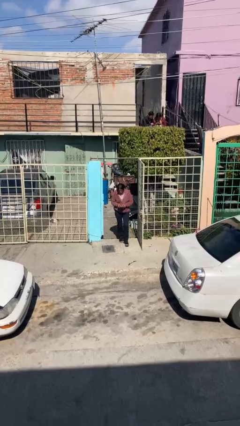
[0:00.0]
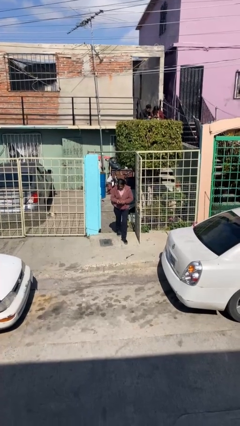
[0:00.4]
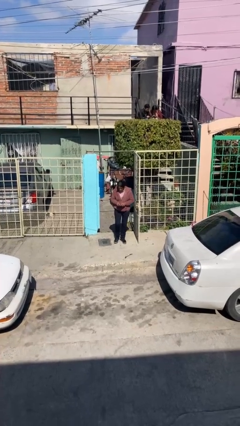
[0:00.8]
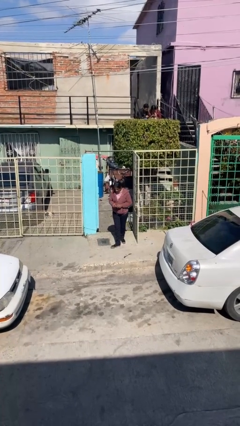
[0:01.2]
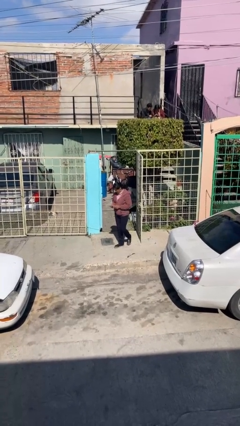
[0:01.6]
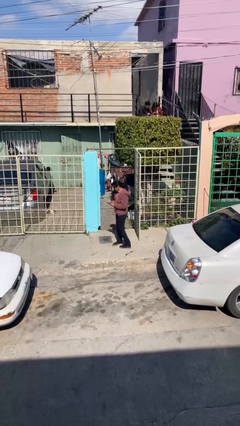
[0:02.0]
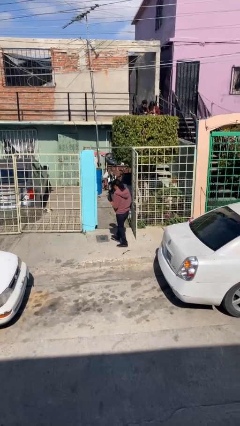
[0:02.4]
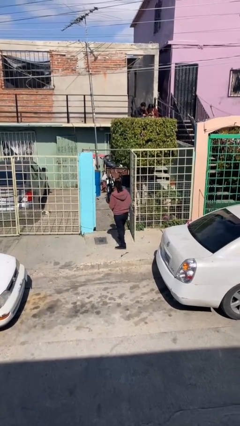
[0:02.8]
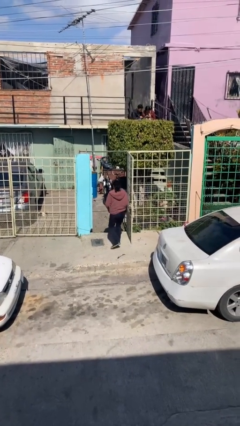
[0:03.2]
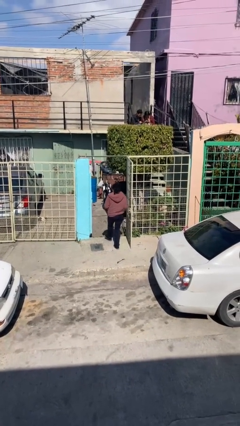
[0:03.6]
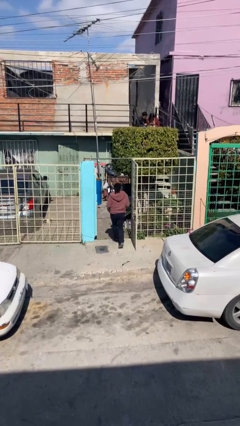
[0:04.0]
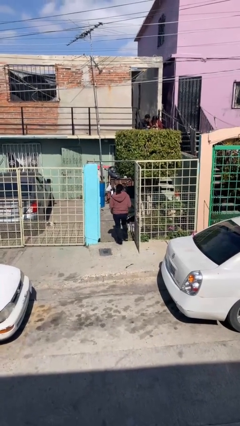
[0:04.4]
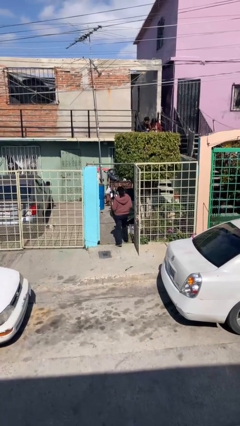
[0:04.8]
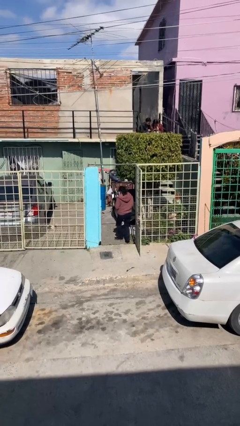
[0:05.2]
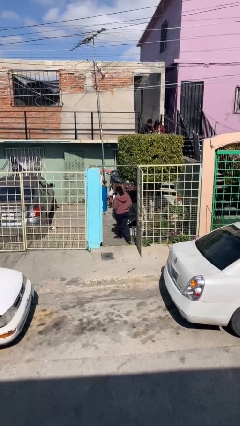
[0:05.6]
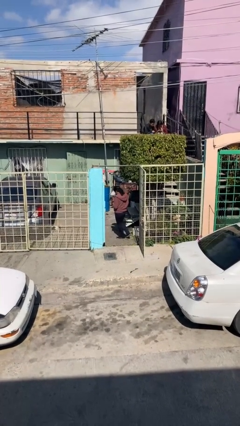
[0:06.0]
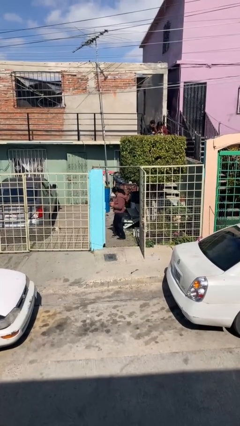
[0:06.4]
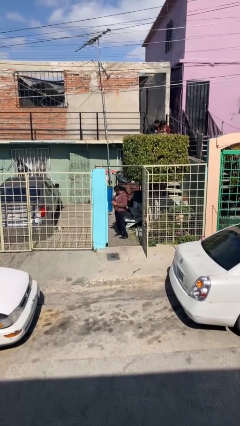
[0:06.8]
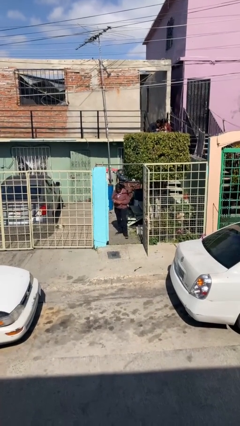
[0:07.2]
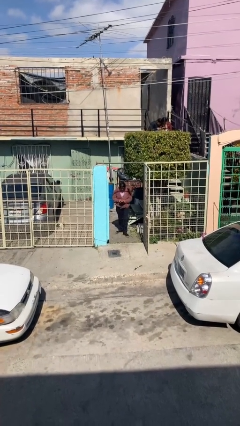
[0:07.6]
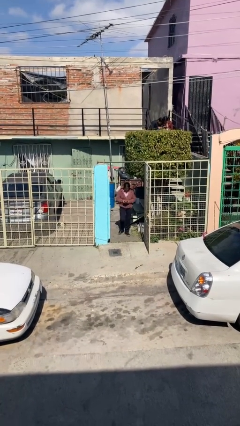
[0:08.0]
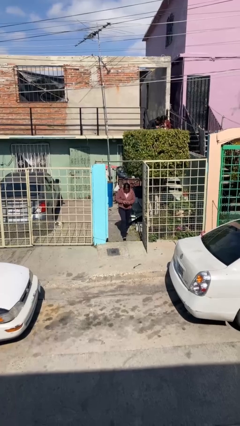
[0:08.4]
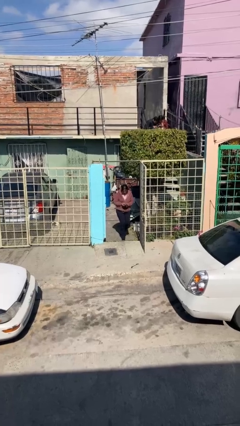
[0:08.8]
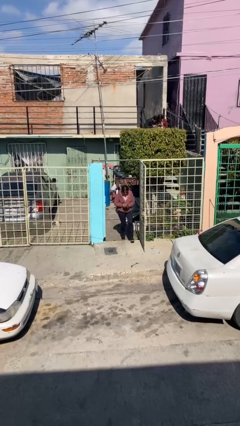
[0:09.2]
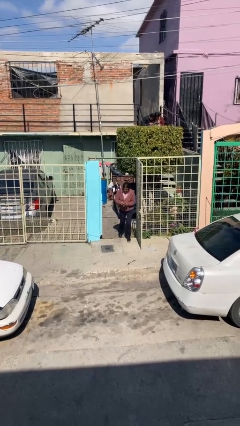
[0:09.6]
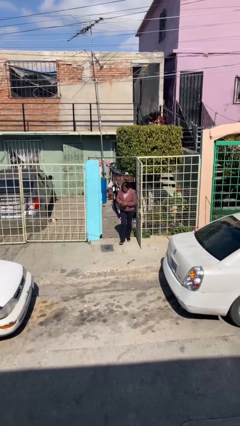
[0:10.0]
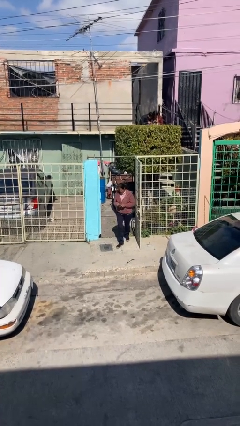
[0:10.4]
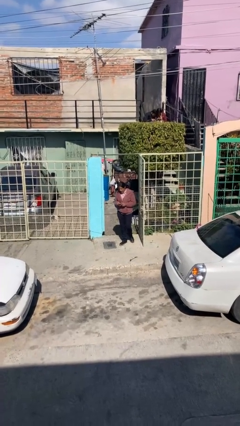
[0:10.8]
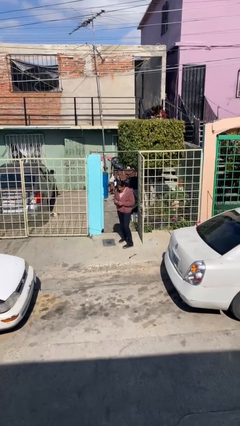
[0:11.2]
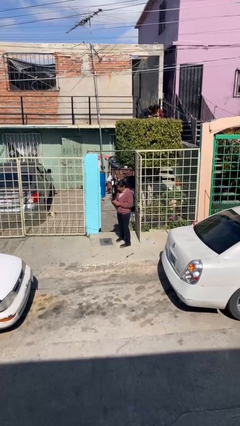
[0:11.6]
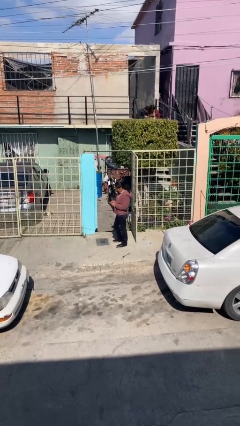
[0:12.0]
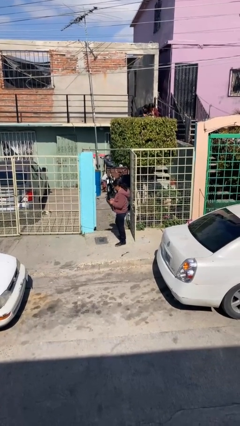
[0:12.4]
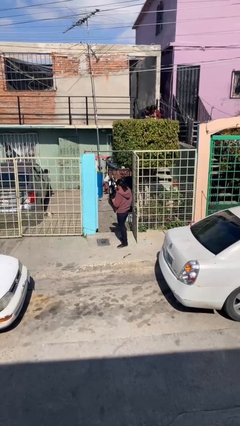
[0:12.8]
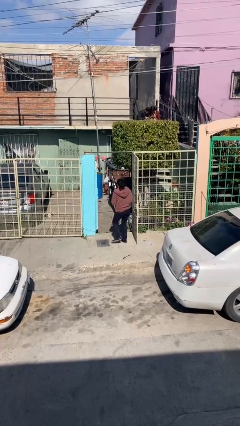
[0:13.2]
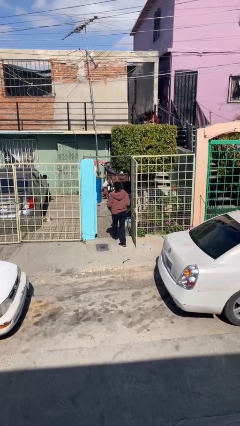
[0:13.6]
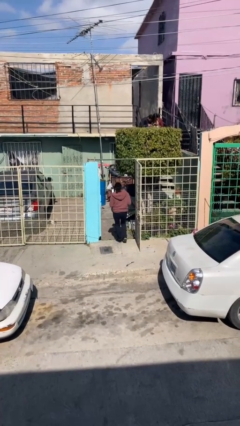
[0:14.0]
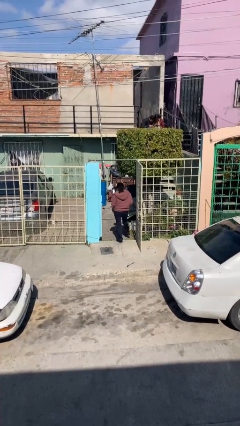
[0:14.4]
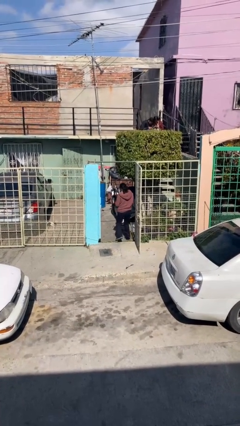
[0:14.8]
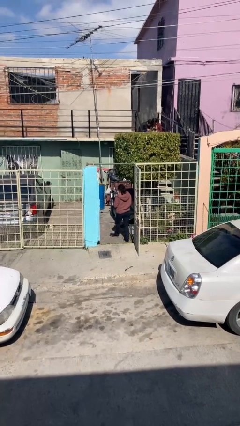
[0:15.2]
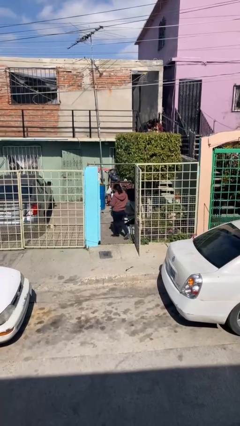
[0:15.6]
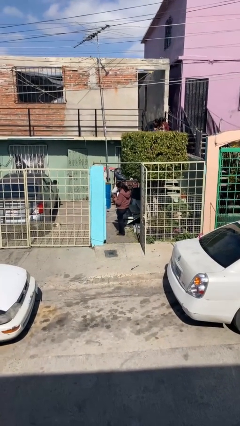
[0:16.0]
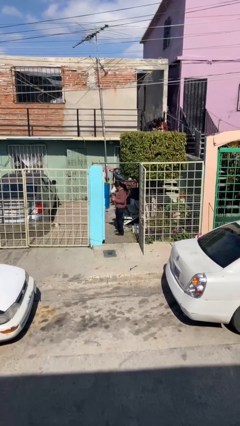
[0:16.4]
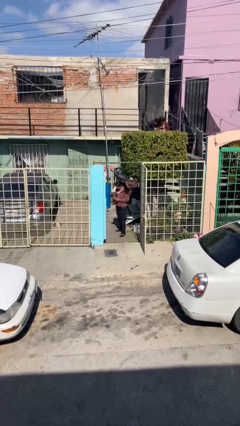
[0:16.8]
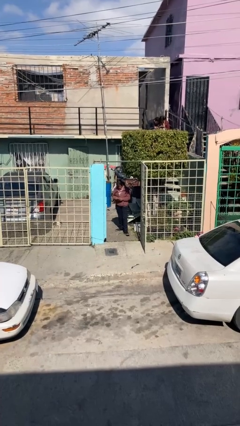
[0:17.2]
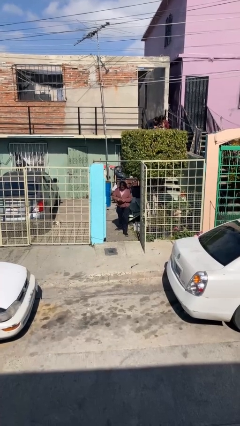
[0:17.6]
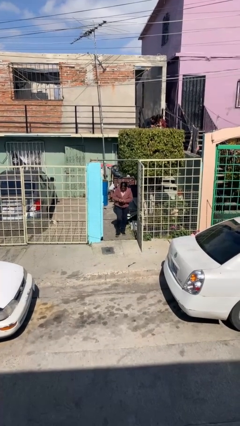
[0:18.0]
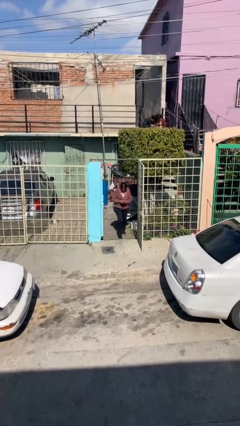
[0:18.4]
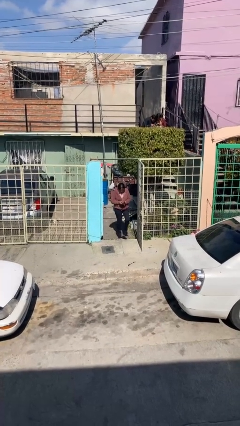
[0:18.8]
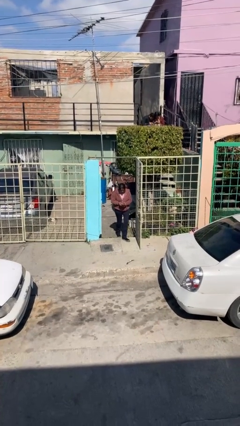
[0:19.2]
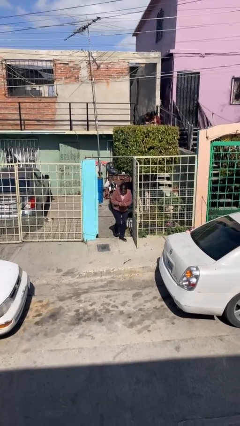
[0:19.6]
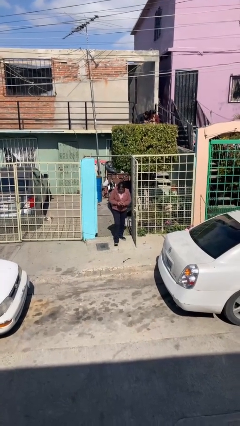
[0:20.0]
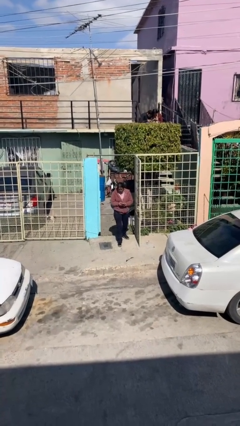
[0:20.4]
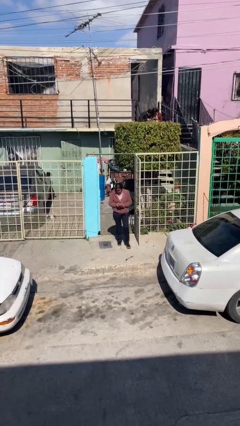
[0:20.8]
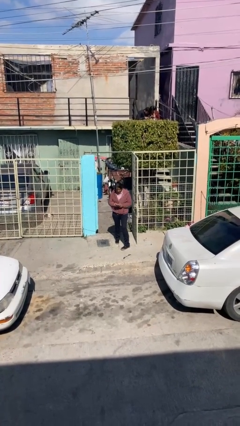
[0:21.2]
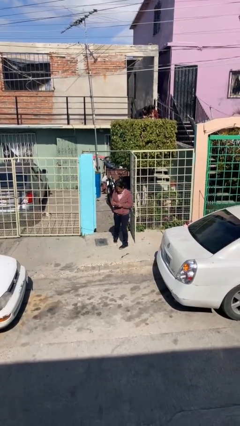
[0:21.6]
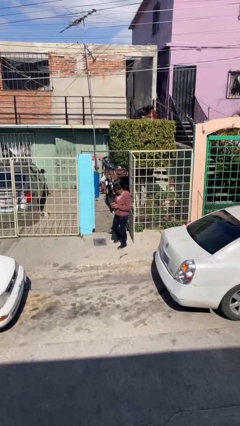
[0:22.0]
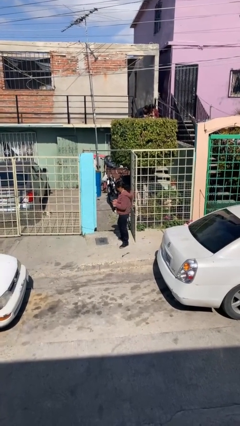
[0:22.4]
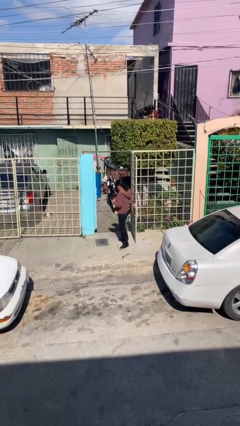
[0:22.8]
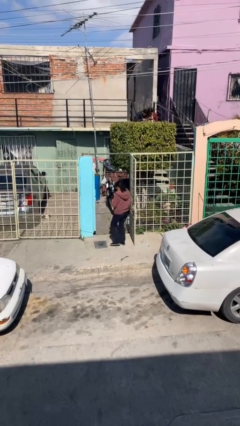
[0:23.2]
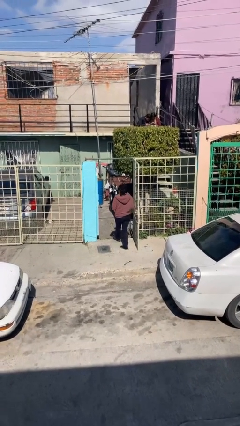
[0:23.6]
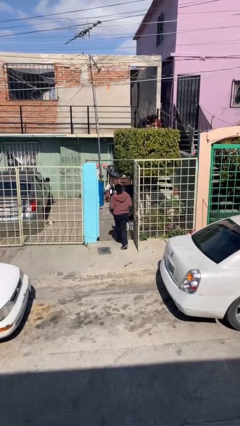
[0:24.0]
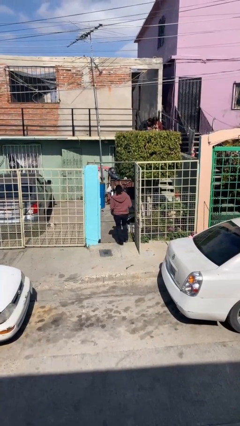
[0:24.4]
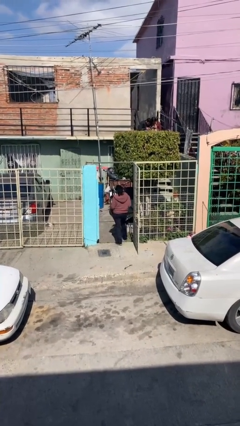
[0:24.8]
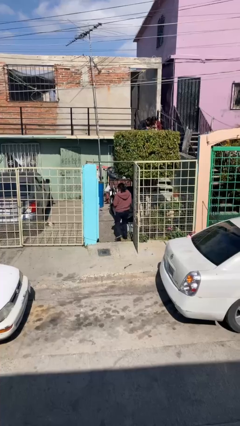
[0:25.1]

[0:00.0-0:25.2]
person texts on phone

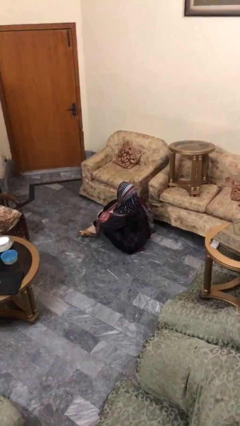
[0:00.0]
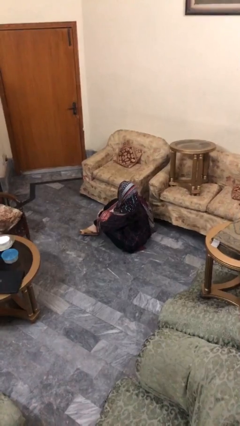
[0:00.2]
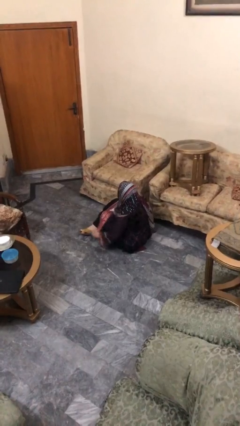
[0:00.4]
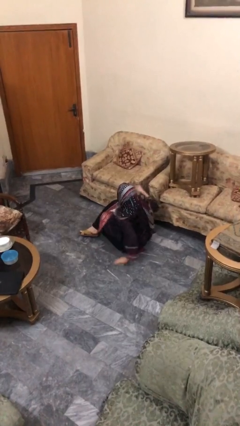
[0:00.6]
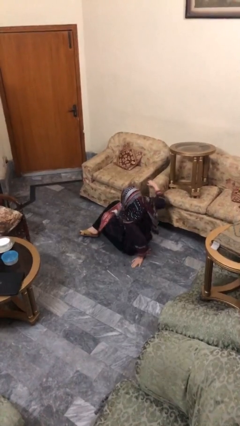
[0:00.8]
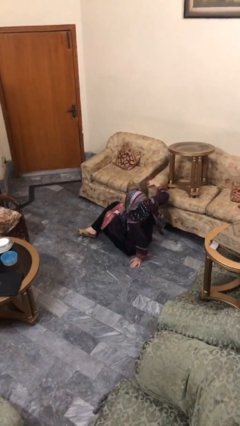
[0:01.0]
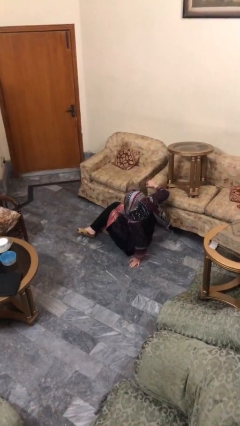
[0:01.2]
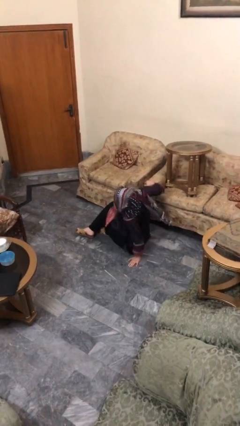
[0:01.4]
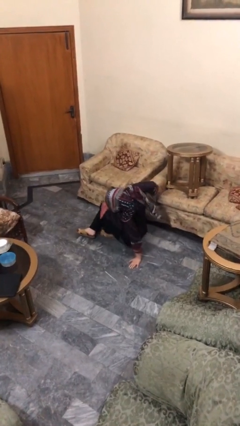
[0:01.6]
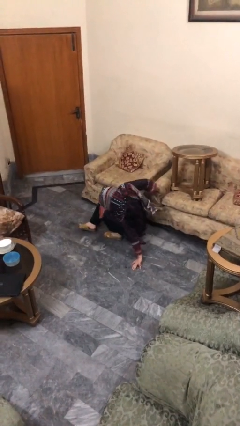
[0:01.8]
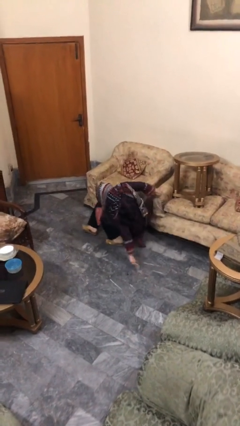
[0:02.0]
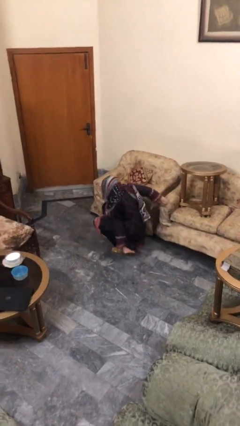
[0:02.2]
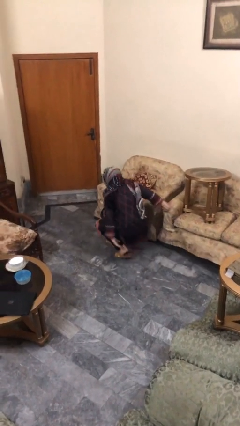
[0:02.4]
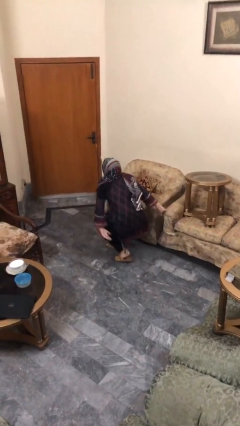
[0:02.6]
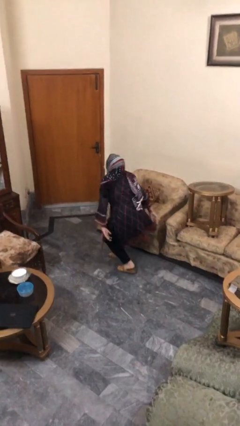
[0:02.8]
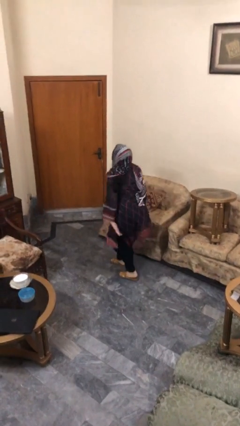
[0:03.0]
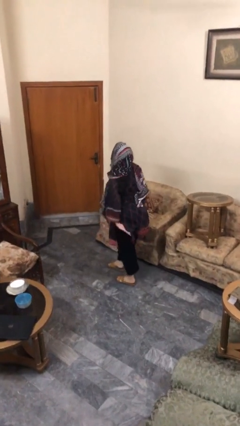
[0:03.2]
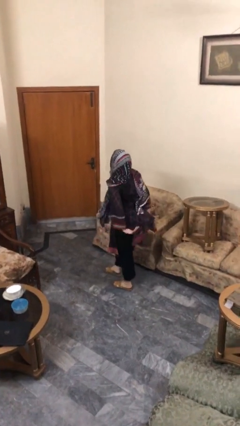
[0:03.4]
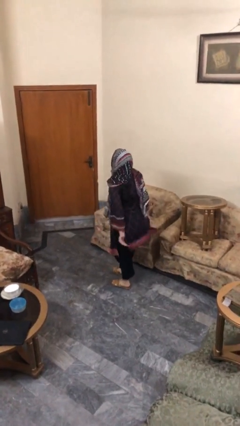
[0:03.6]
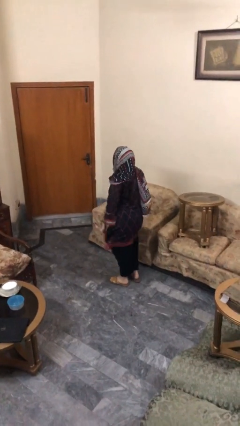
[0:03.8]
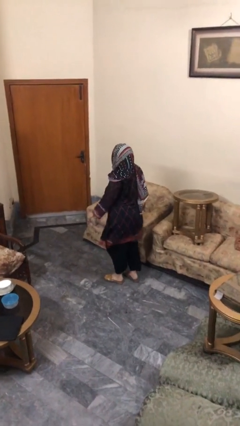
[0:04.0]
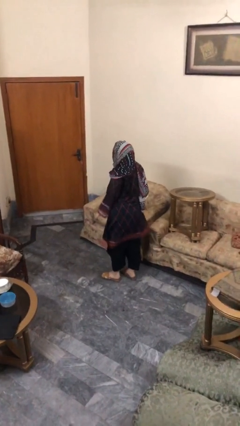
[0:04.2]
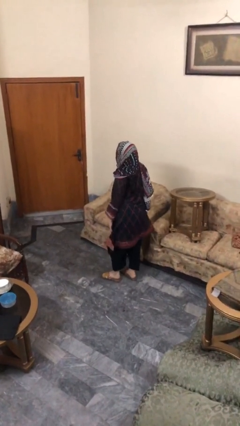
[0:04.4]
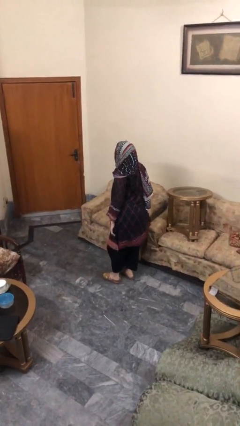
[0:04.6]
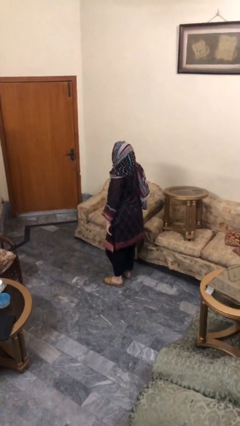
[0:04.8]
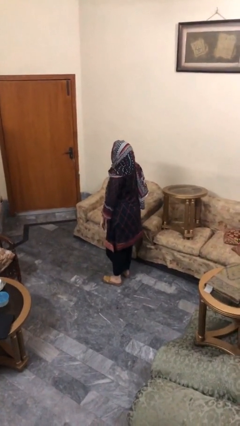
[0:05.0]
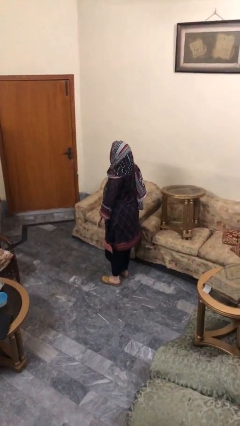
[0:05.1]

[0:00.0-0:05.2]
person stands up from floor
